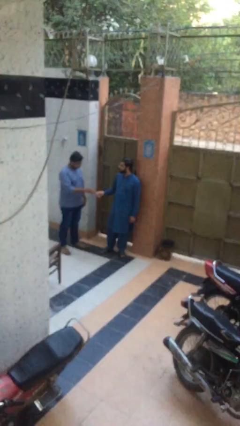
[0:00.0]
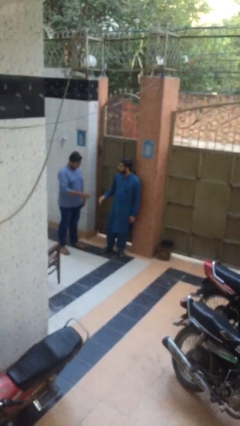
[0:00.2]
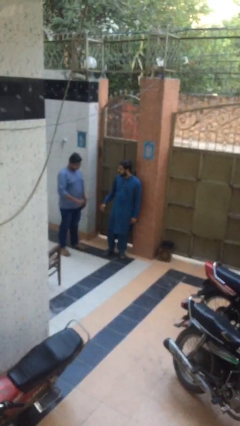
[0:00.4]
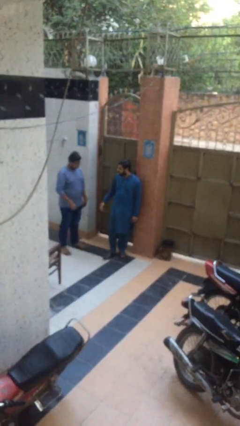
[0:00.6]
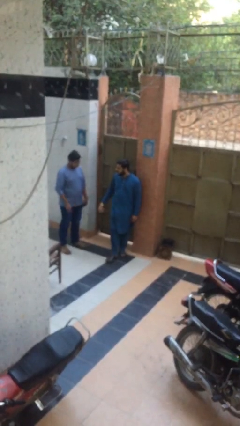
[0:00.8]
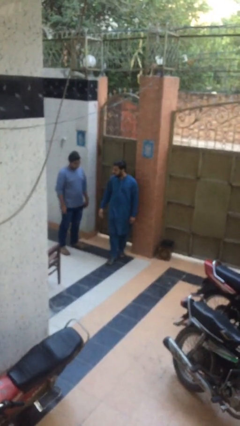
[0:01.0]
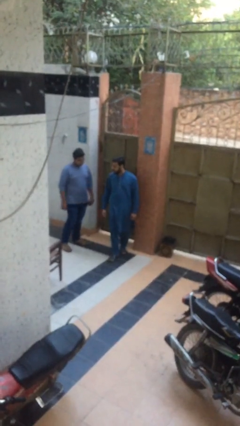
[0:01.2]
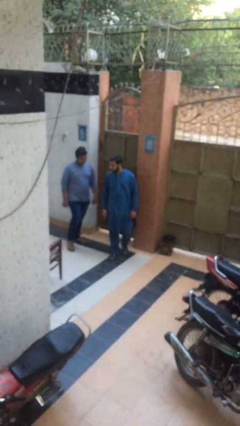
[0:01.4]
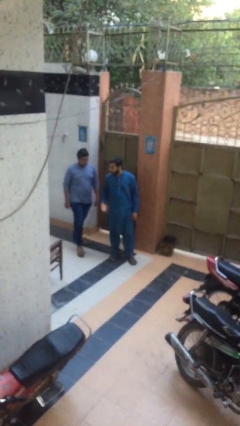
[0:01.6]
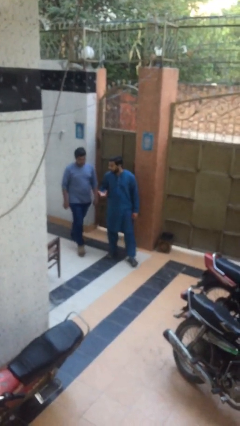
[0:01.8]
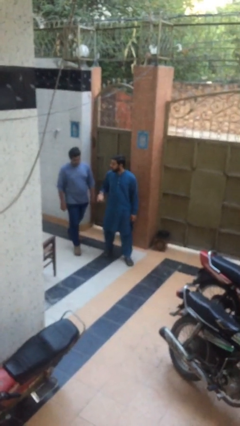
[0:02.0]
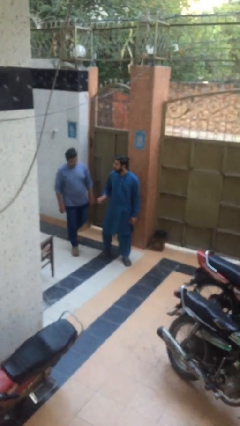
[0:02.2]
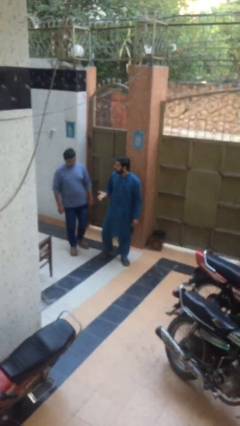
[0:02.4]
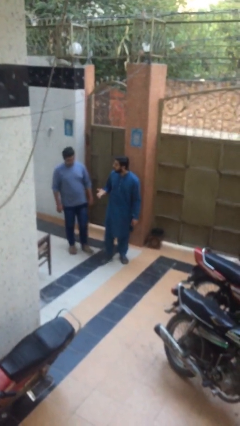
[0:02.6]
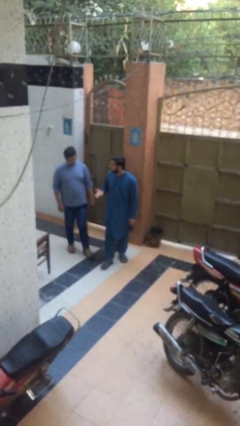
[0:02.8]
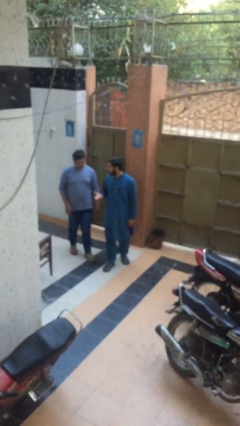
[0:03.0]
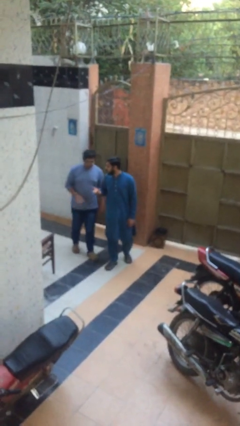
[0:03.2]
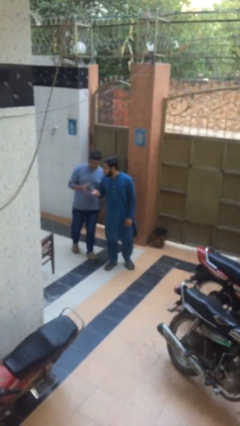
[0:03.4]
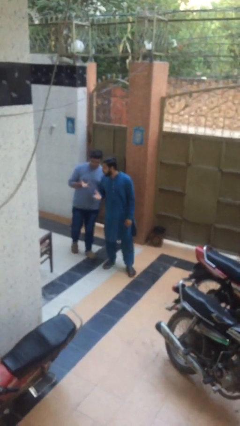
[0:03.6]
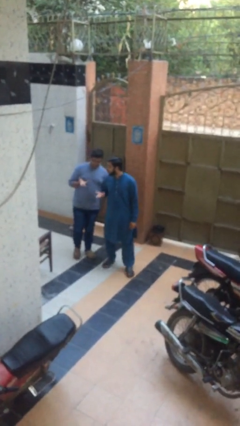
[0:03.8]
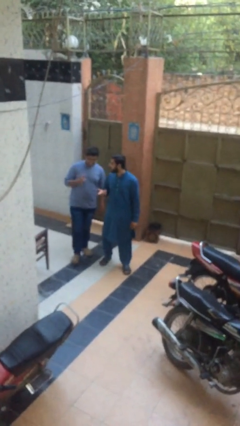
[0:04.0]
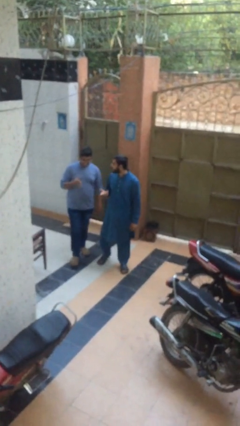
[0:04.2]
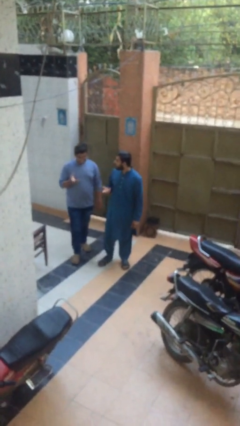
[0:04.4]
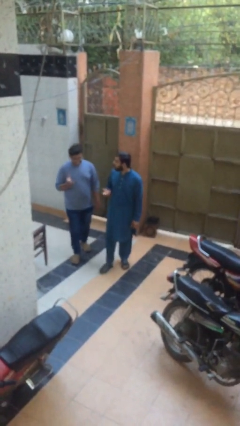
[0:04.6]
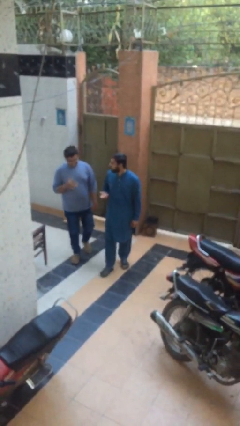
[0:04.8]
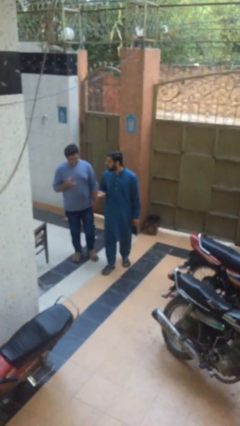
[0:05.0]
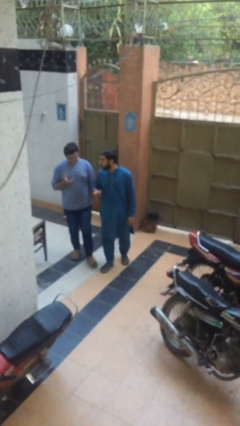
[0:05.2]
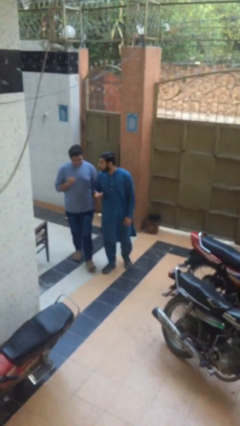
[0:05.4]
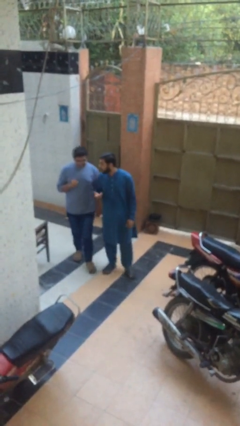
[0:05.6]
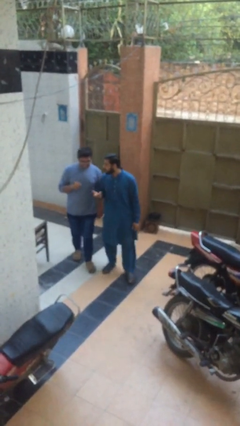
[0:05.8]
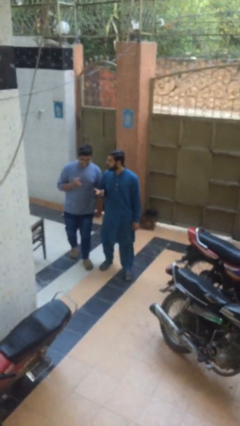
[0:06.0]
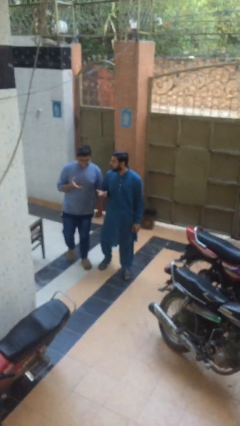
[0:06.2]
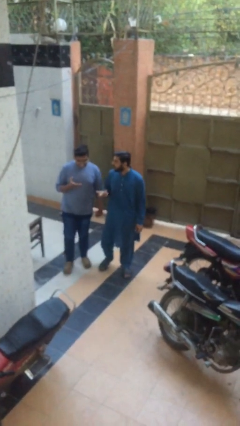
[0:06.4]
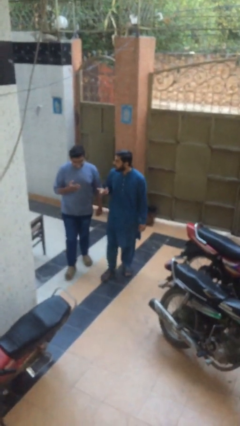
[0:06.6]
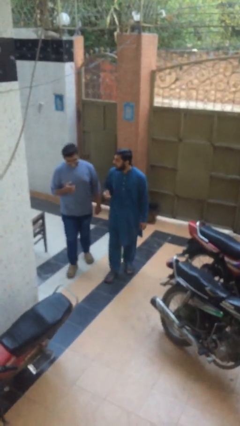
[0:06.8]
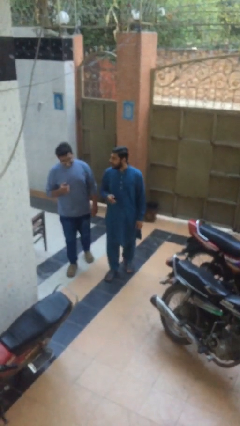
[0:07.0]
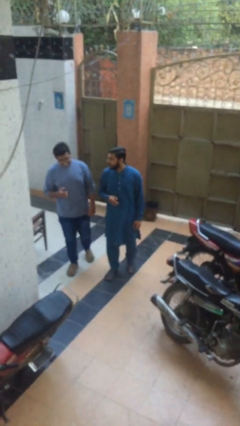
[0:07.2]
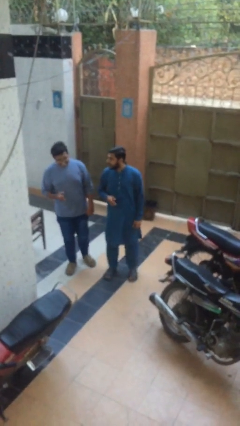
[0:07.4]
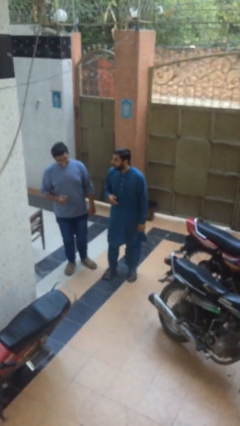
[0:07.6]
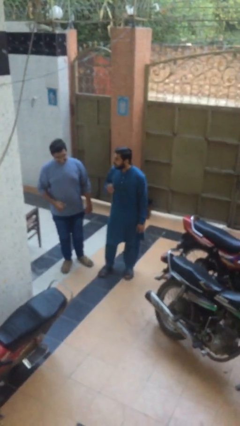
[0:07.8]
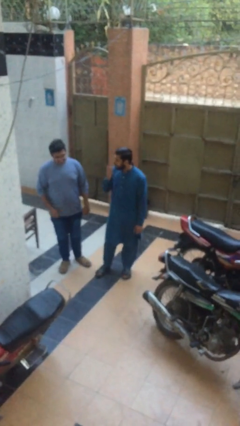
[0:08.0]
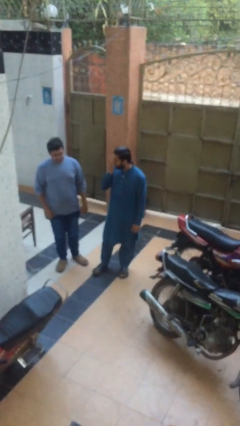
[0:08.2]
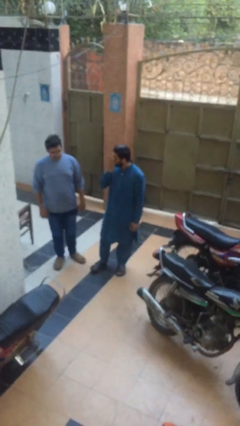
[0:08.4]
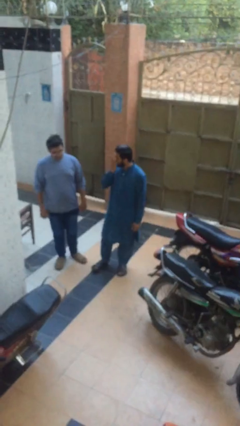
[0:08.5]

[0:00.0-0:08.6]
person talks to person

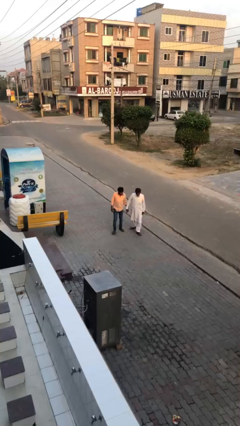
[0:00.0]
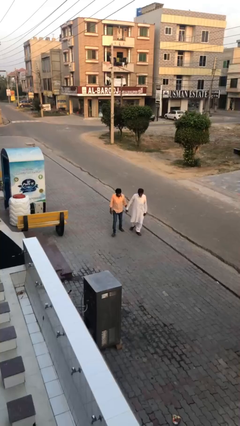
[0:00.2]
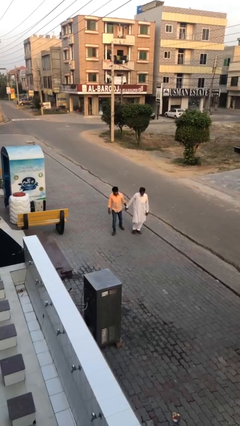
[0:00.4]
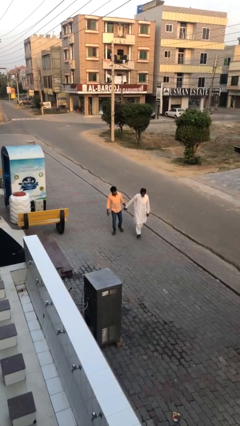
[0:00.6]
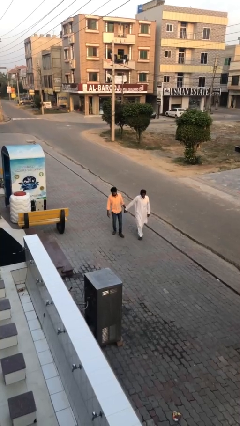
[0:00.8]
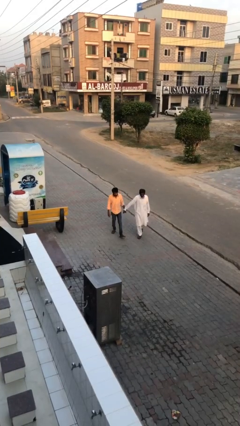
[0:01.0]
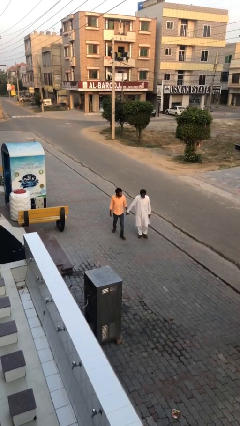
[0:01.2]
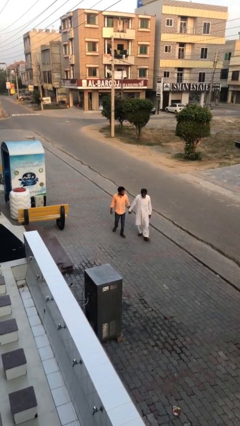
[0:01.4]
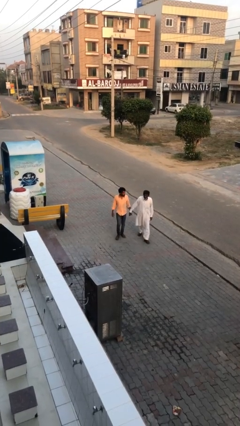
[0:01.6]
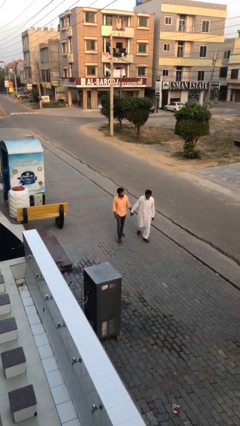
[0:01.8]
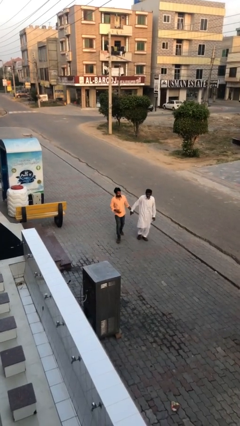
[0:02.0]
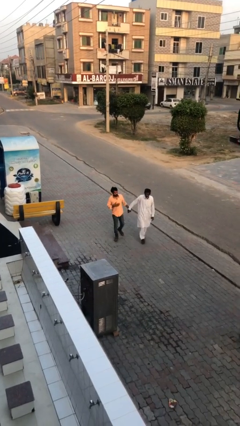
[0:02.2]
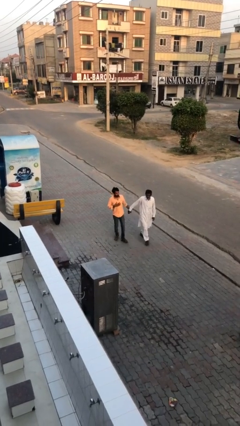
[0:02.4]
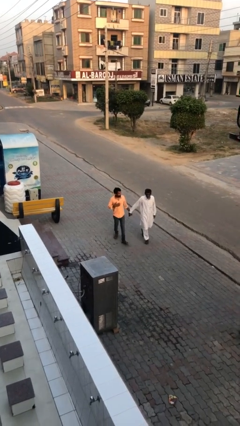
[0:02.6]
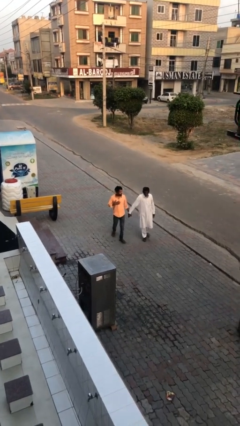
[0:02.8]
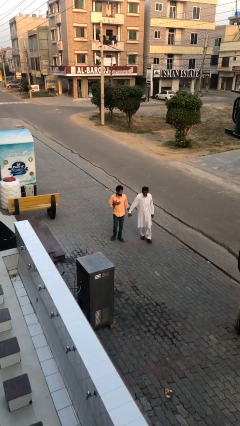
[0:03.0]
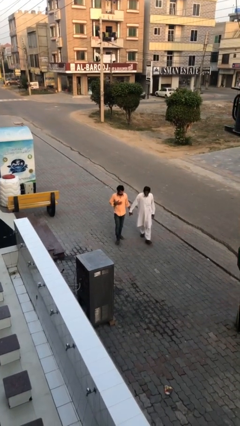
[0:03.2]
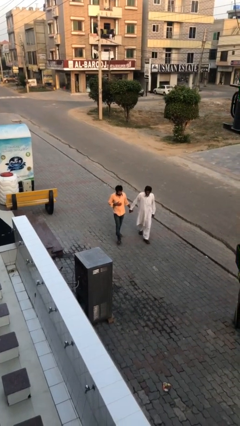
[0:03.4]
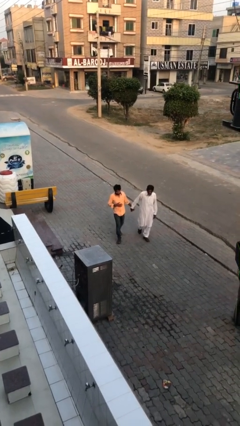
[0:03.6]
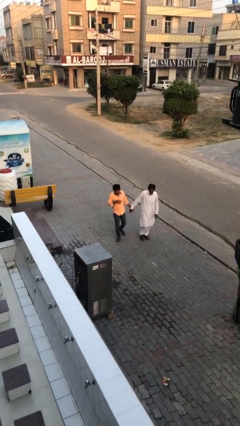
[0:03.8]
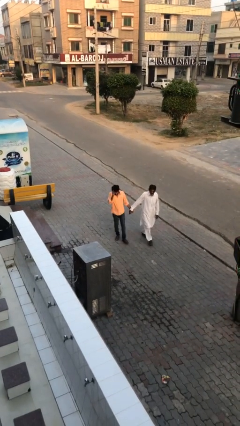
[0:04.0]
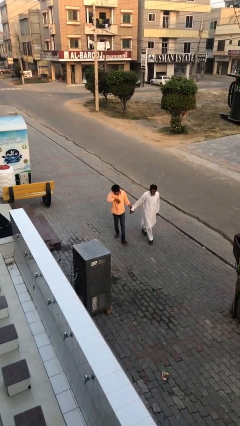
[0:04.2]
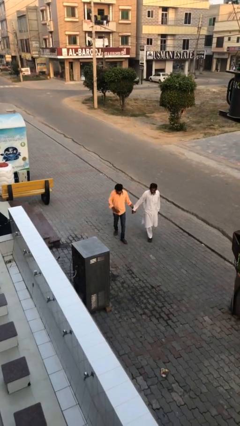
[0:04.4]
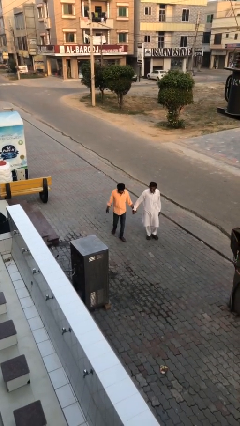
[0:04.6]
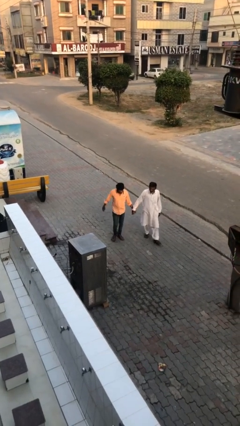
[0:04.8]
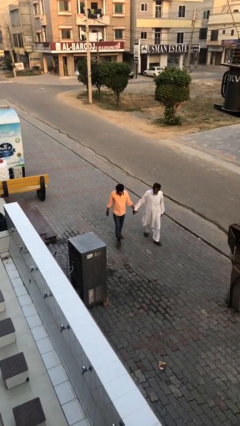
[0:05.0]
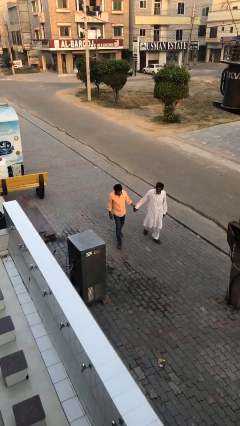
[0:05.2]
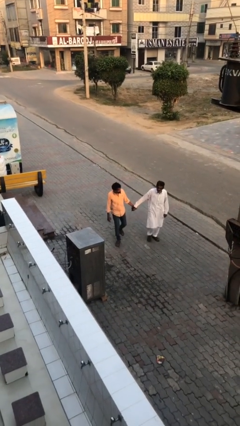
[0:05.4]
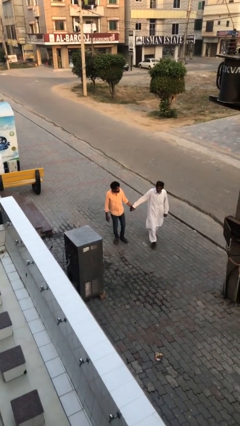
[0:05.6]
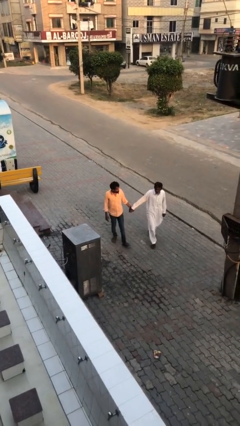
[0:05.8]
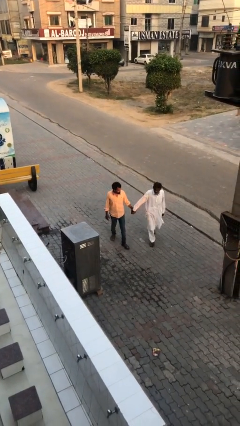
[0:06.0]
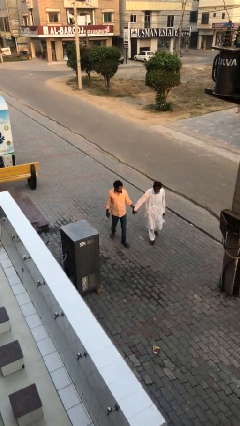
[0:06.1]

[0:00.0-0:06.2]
person holds hand

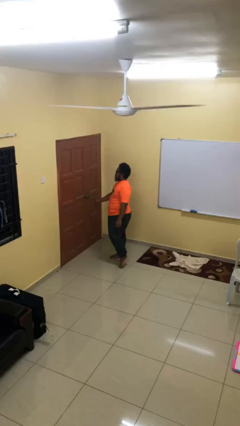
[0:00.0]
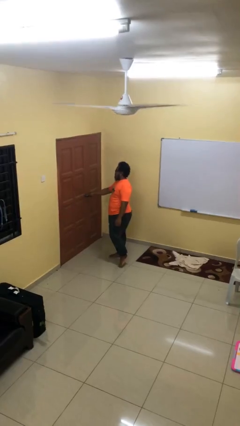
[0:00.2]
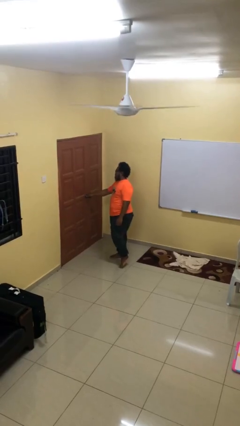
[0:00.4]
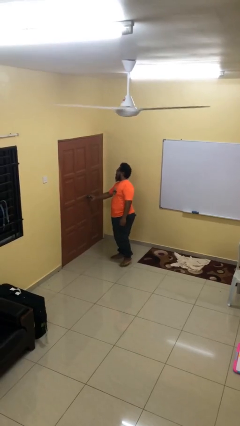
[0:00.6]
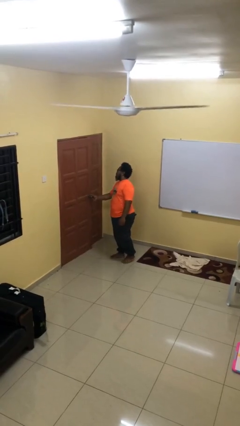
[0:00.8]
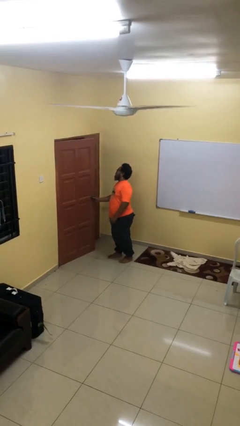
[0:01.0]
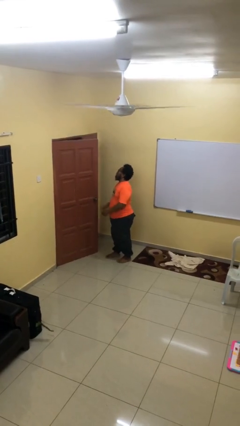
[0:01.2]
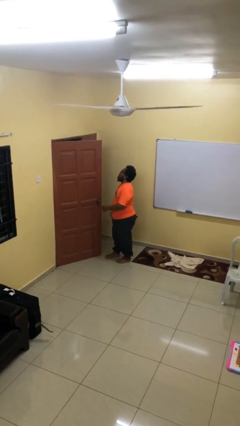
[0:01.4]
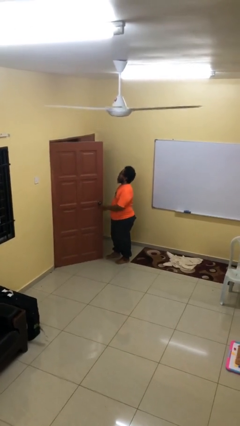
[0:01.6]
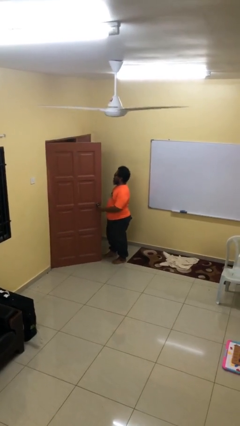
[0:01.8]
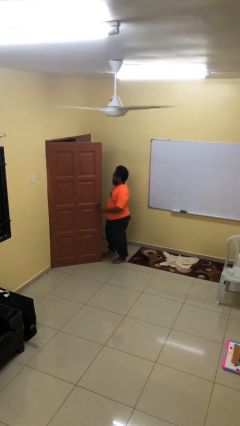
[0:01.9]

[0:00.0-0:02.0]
person opens facility door

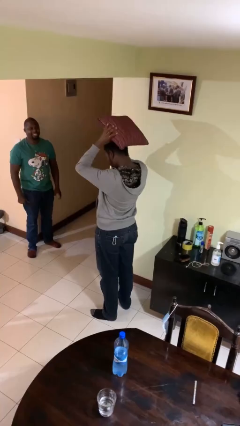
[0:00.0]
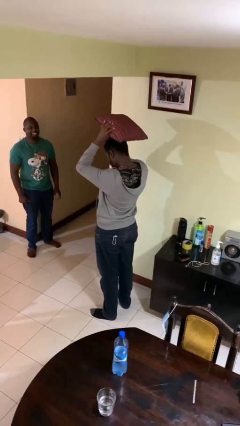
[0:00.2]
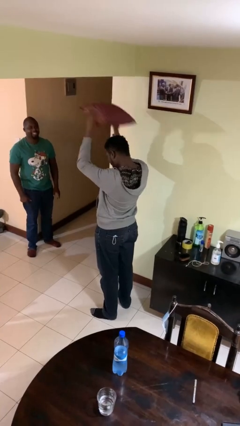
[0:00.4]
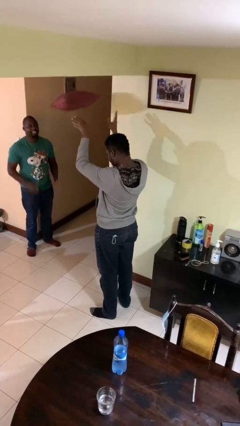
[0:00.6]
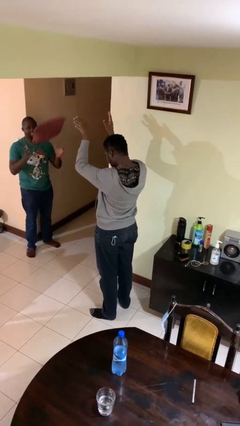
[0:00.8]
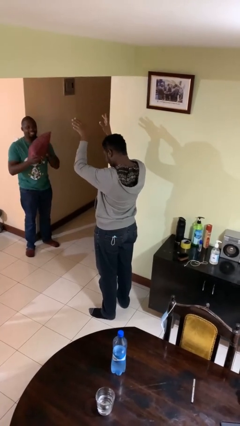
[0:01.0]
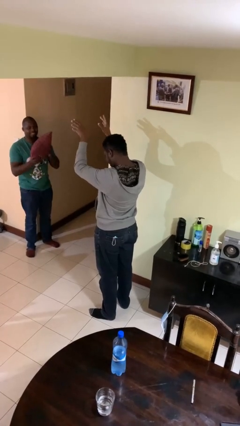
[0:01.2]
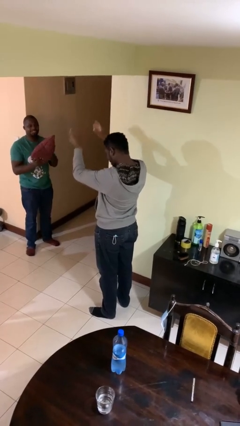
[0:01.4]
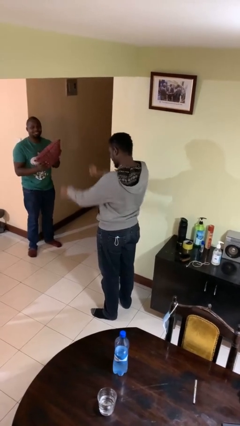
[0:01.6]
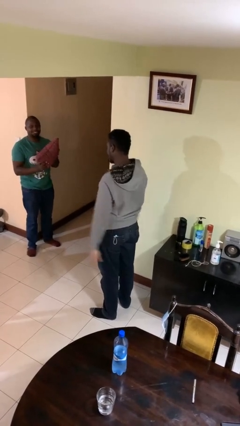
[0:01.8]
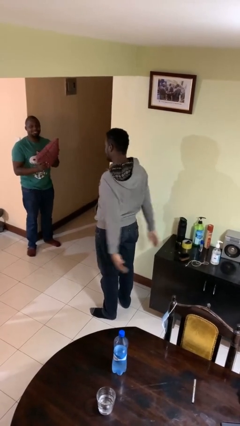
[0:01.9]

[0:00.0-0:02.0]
person throws object to person
